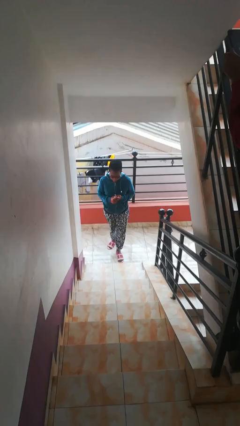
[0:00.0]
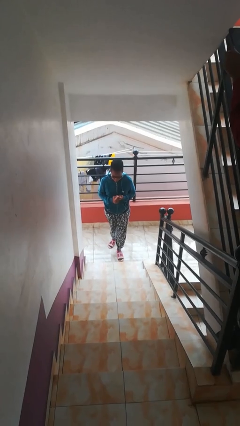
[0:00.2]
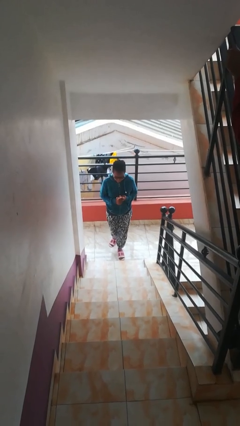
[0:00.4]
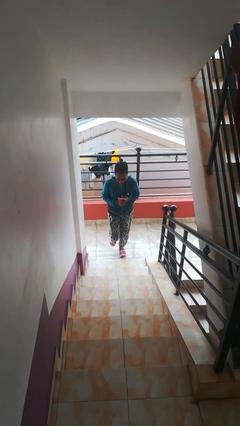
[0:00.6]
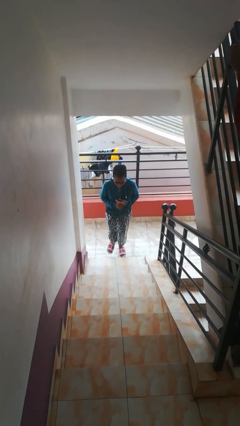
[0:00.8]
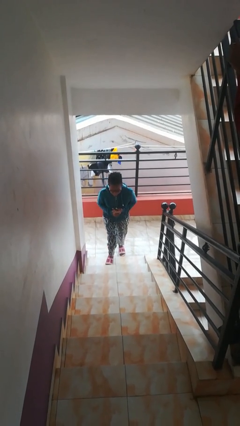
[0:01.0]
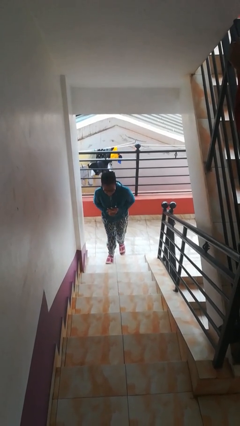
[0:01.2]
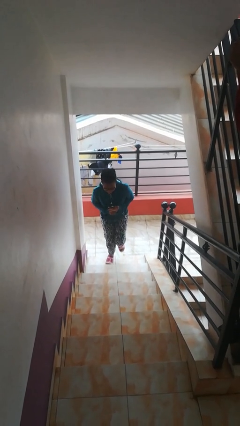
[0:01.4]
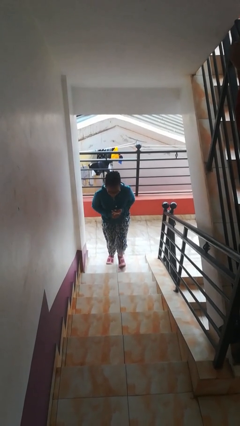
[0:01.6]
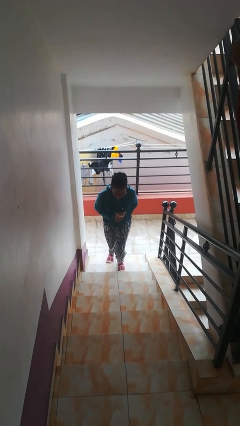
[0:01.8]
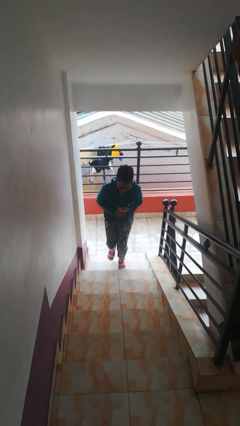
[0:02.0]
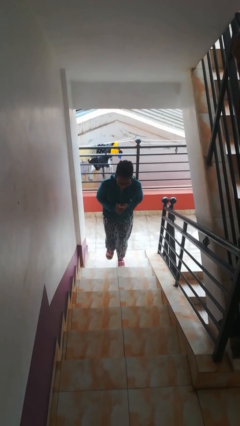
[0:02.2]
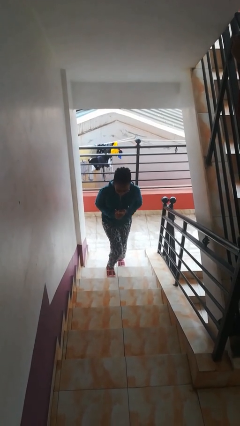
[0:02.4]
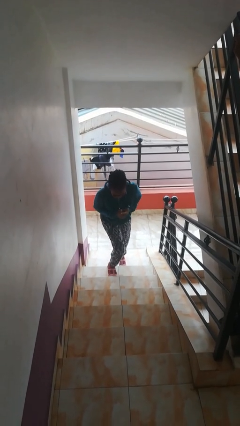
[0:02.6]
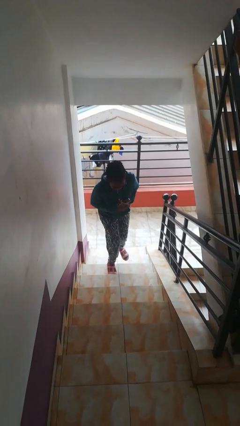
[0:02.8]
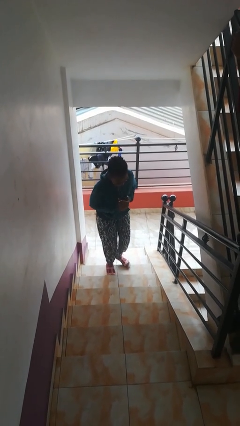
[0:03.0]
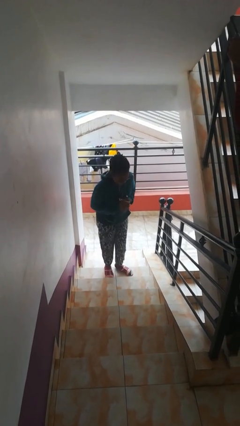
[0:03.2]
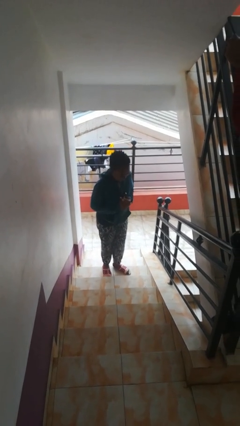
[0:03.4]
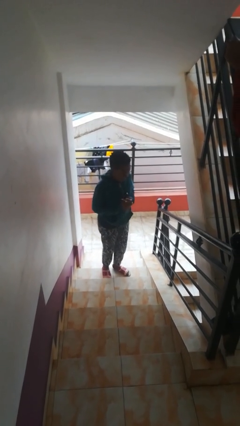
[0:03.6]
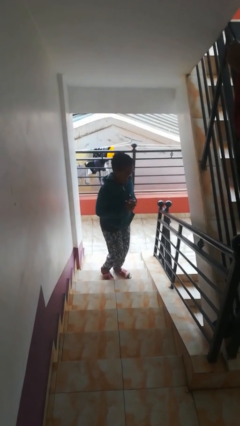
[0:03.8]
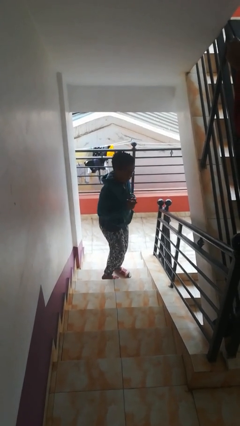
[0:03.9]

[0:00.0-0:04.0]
person climbs up stairs

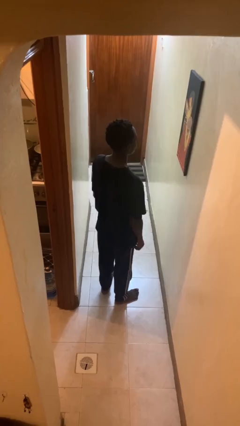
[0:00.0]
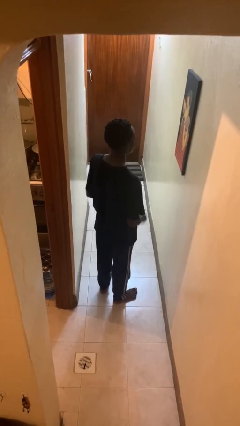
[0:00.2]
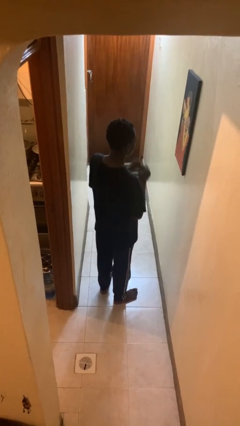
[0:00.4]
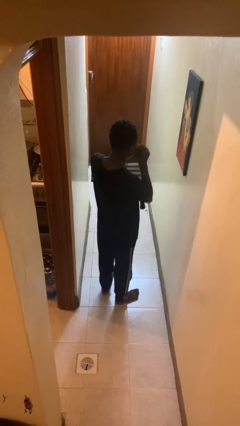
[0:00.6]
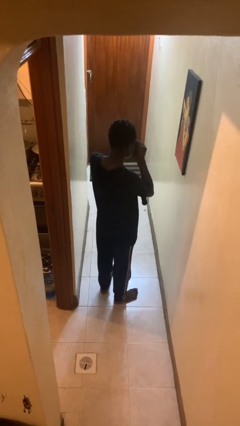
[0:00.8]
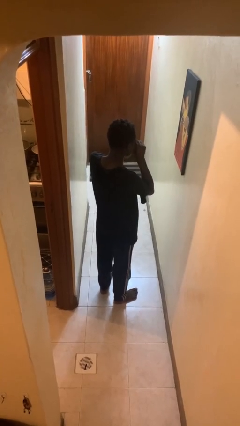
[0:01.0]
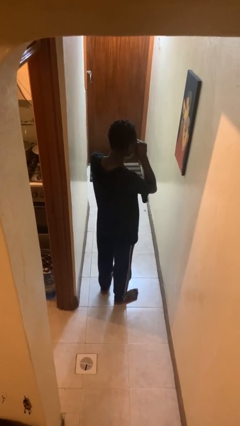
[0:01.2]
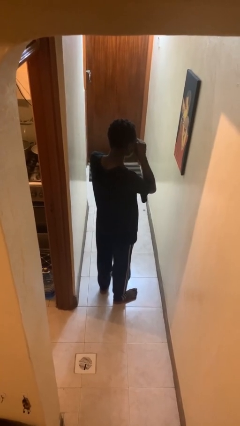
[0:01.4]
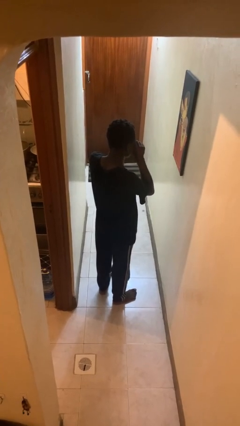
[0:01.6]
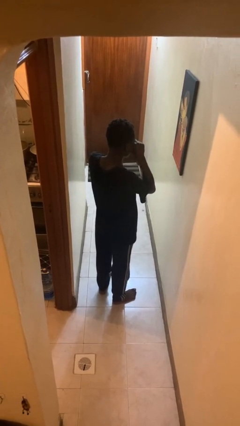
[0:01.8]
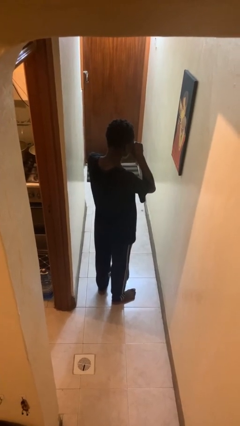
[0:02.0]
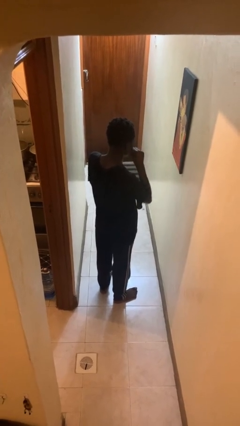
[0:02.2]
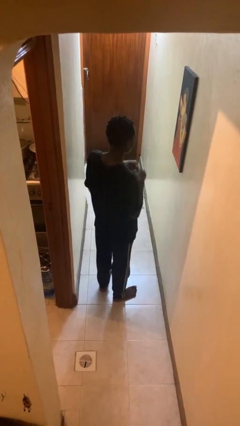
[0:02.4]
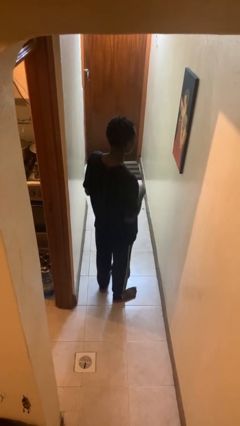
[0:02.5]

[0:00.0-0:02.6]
person rubs eyes

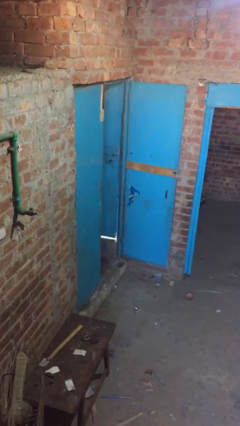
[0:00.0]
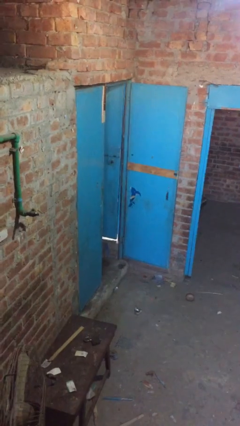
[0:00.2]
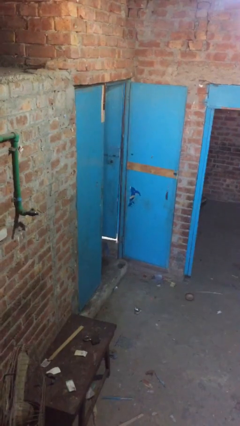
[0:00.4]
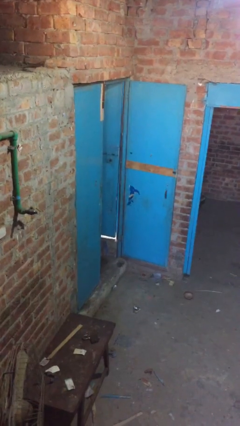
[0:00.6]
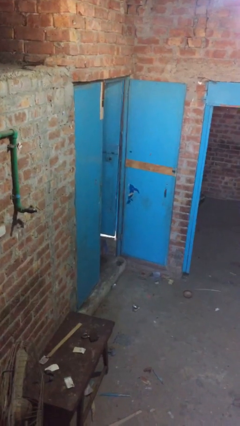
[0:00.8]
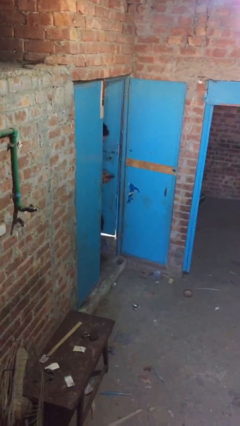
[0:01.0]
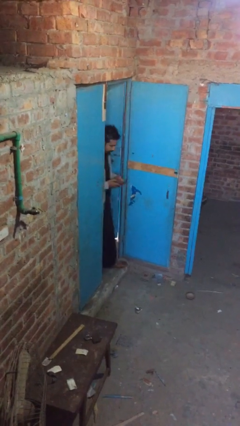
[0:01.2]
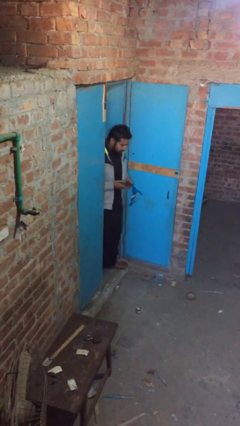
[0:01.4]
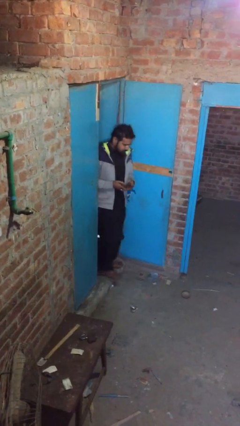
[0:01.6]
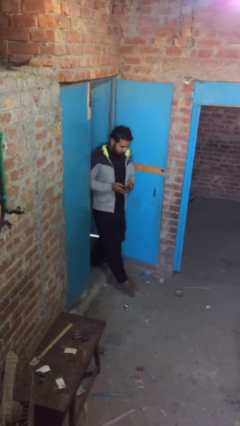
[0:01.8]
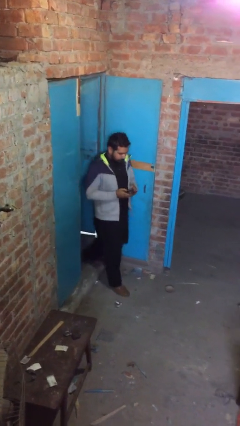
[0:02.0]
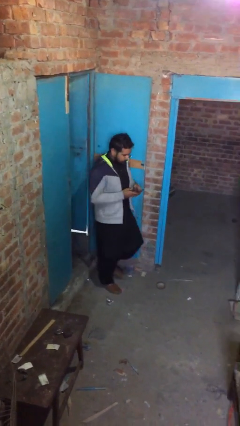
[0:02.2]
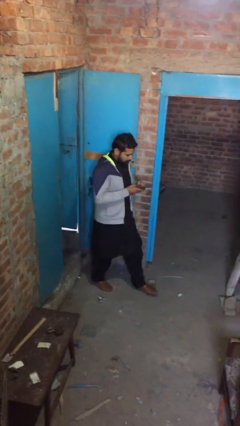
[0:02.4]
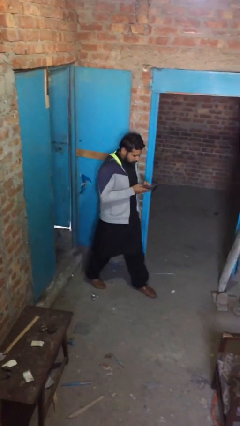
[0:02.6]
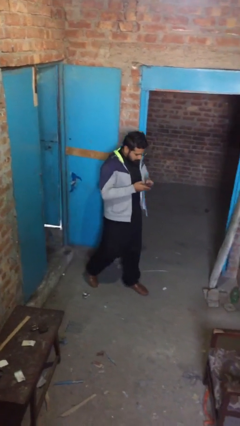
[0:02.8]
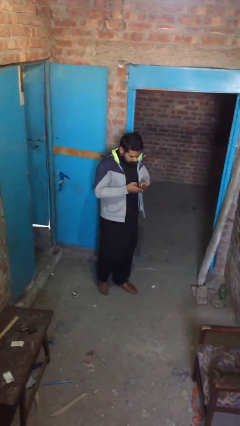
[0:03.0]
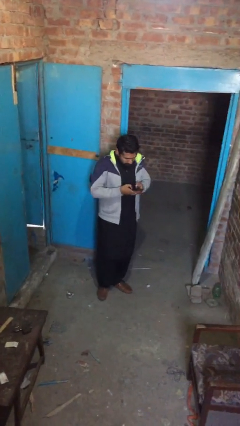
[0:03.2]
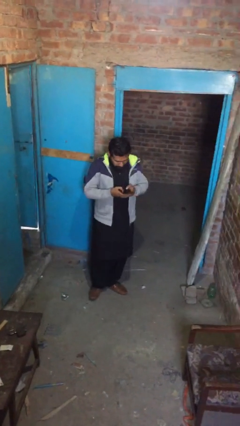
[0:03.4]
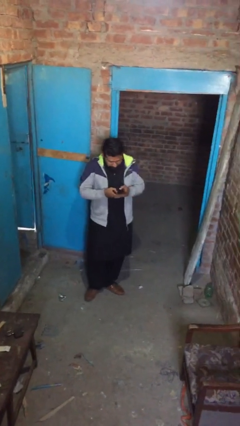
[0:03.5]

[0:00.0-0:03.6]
person enters scene through structure

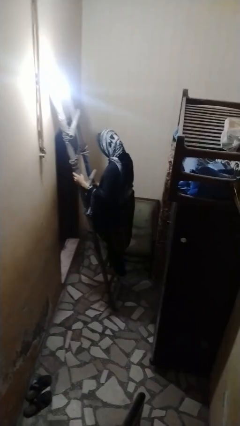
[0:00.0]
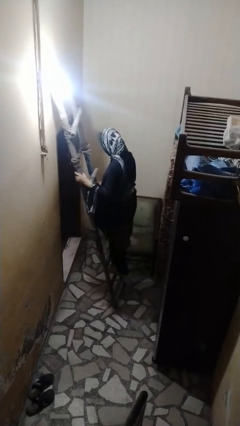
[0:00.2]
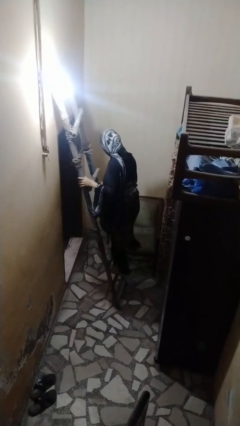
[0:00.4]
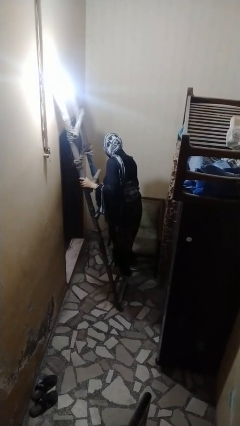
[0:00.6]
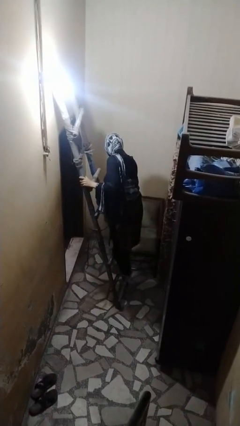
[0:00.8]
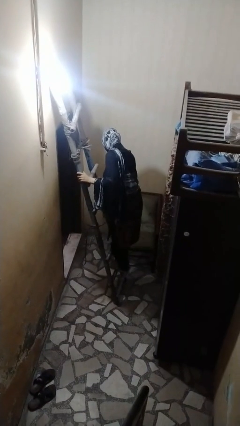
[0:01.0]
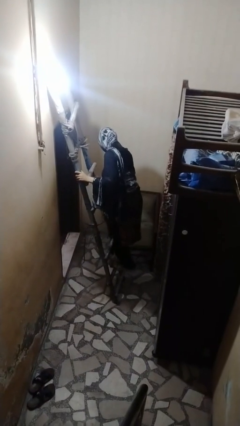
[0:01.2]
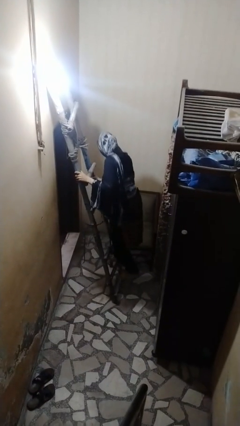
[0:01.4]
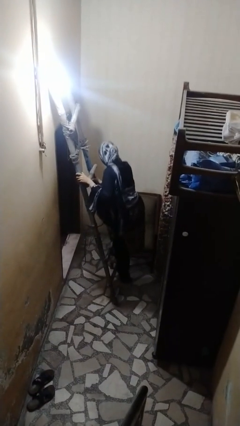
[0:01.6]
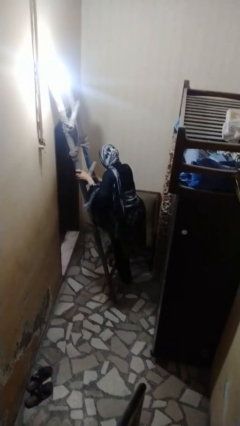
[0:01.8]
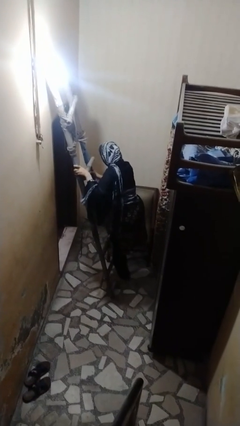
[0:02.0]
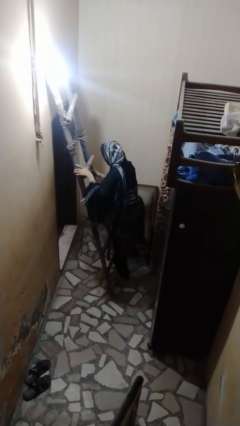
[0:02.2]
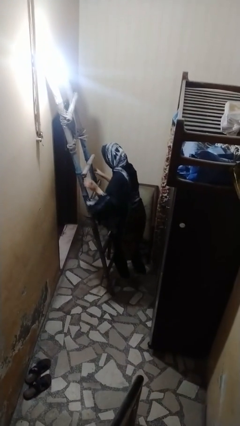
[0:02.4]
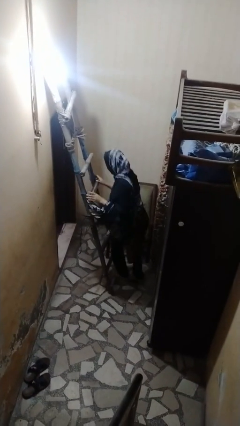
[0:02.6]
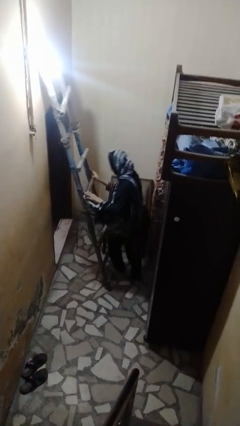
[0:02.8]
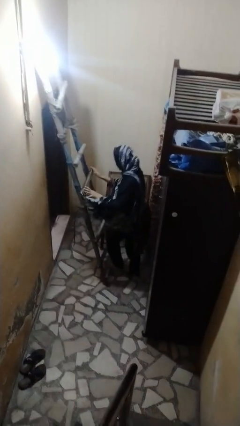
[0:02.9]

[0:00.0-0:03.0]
person climbs down ladder

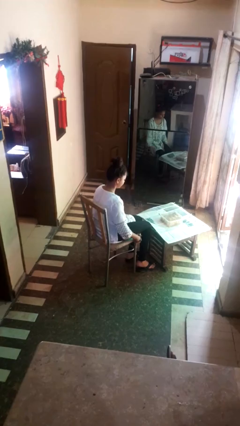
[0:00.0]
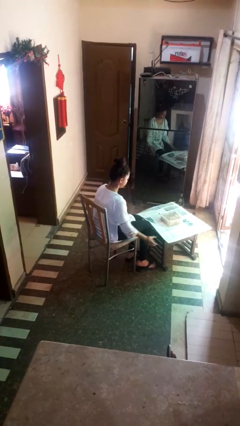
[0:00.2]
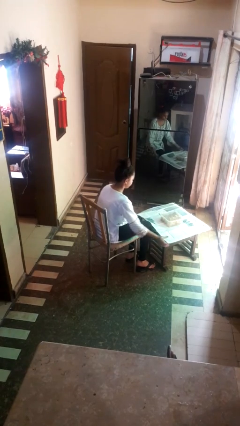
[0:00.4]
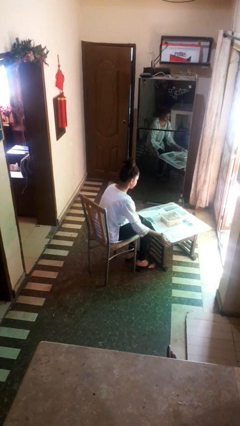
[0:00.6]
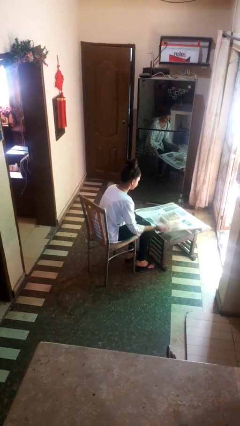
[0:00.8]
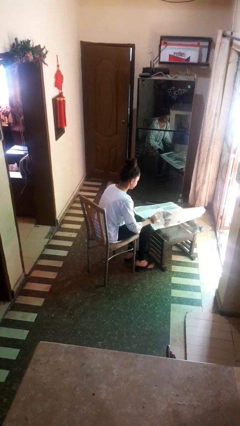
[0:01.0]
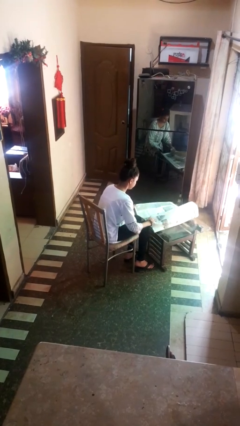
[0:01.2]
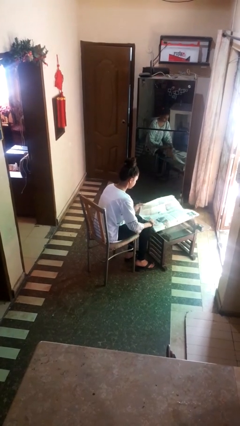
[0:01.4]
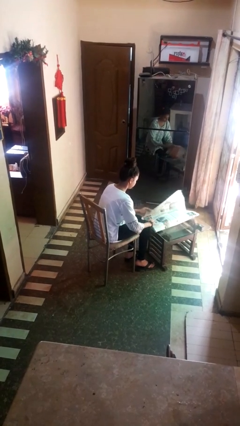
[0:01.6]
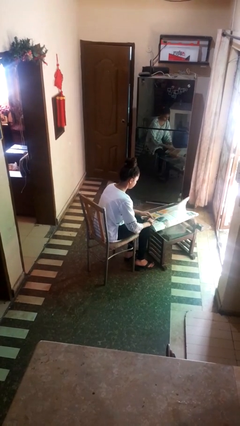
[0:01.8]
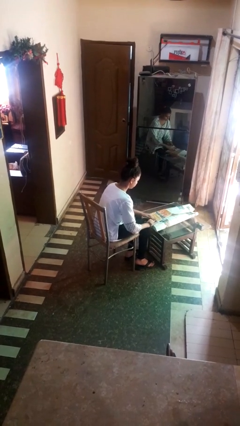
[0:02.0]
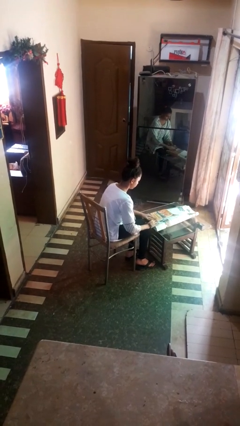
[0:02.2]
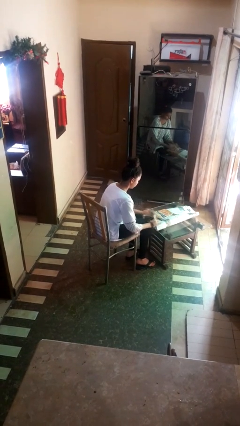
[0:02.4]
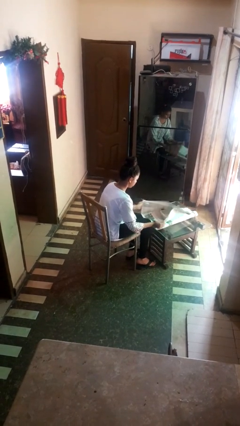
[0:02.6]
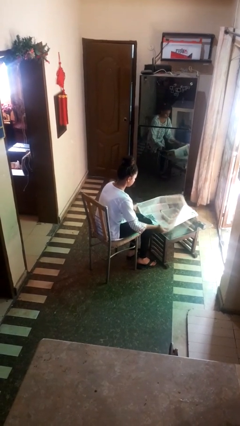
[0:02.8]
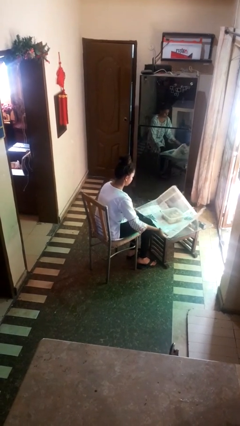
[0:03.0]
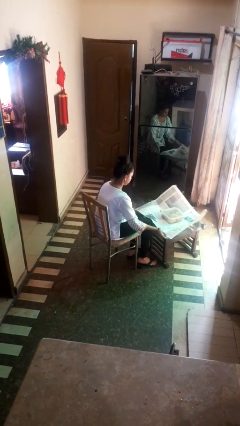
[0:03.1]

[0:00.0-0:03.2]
person wraps box

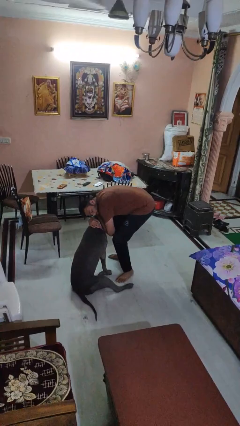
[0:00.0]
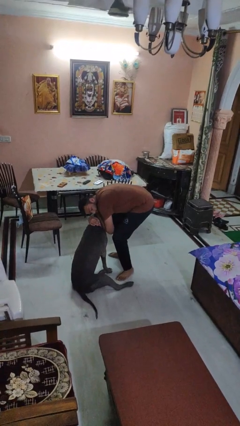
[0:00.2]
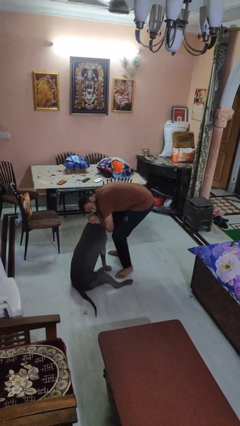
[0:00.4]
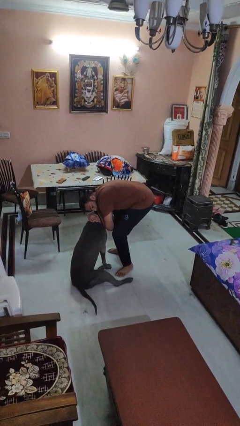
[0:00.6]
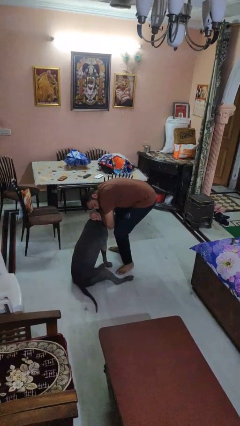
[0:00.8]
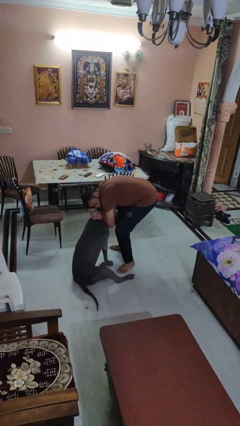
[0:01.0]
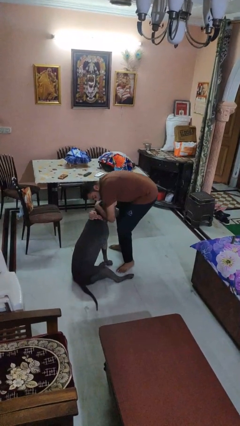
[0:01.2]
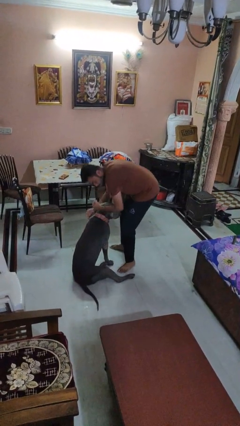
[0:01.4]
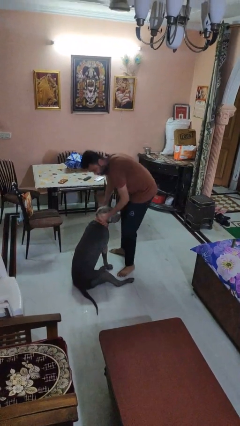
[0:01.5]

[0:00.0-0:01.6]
person hugs dog
